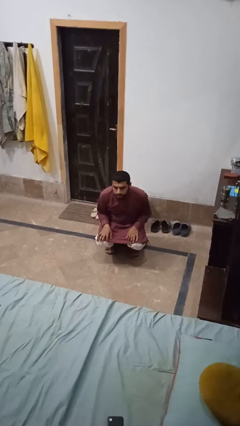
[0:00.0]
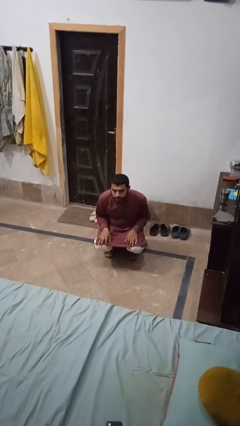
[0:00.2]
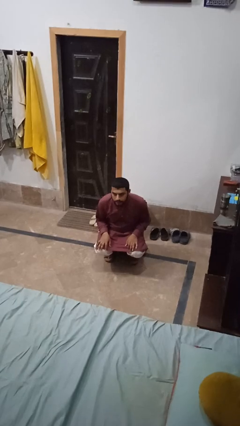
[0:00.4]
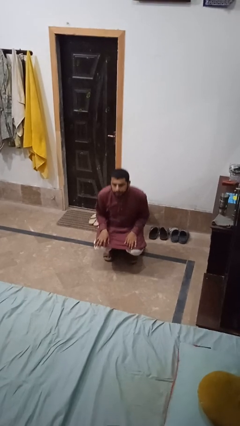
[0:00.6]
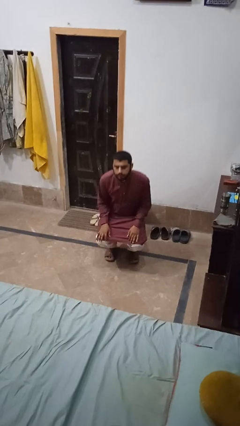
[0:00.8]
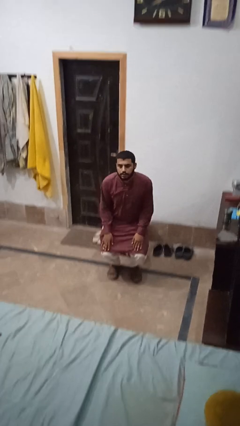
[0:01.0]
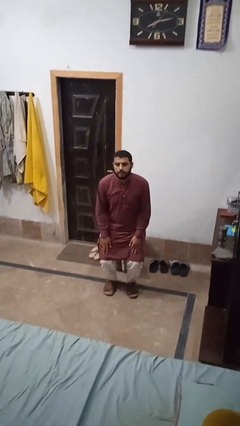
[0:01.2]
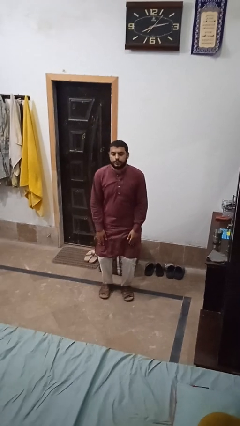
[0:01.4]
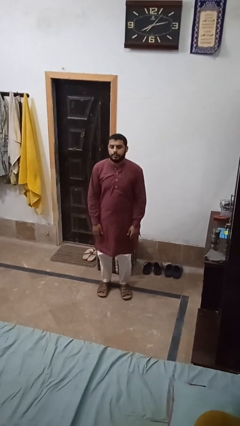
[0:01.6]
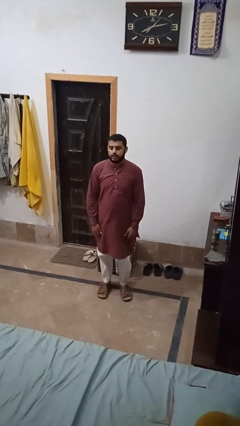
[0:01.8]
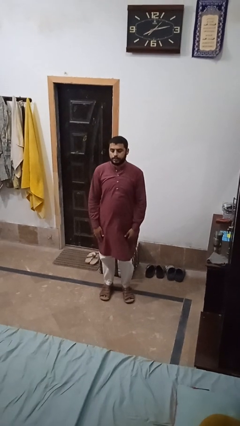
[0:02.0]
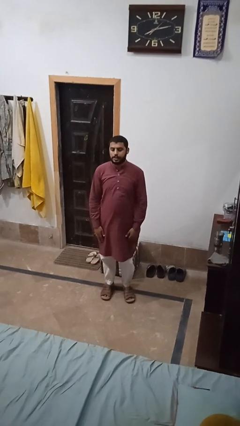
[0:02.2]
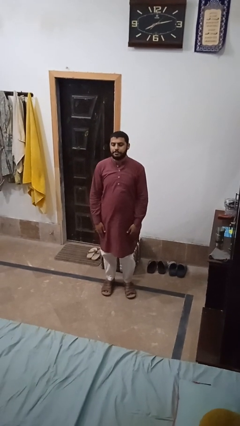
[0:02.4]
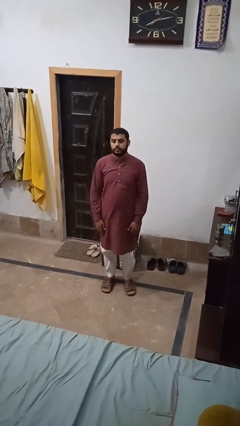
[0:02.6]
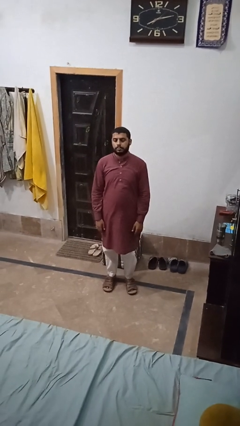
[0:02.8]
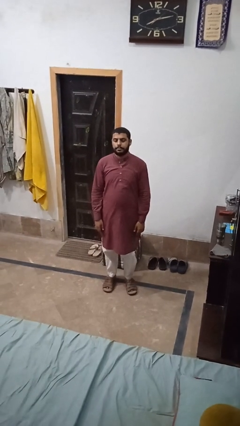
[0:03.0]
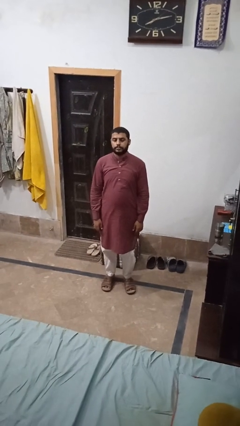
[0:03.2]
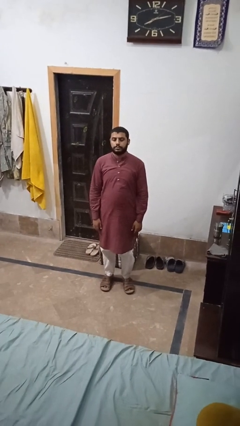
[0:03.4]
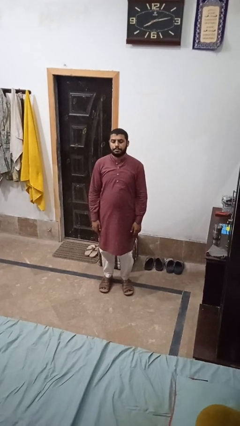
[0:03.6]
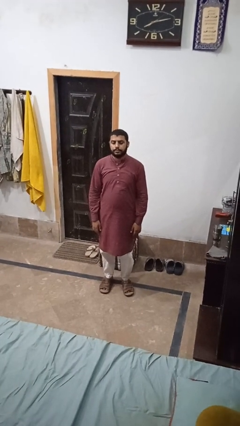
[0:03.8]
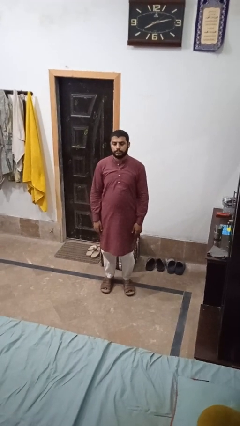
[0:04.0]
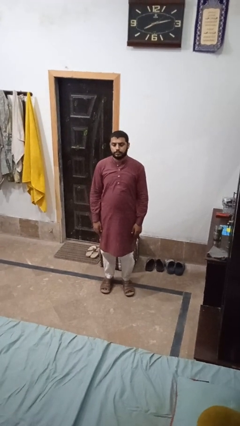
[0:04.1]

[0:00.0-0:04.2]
person stands up

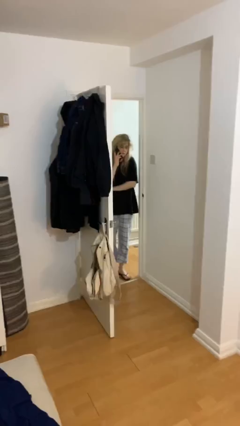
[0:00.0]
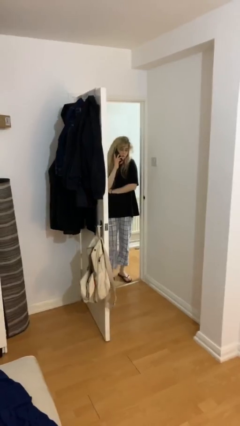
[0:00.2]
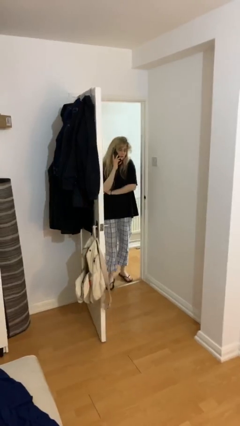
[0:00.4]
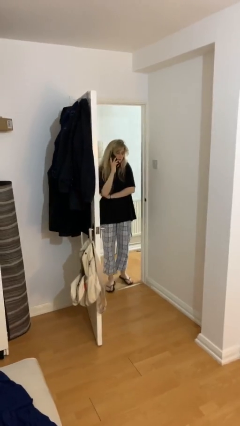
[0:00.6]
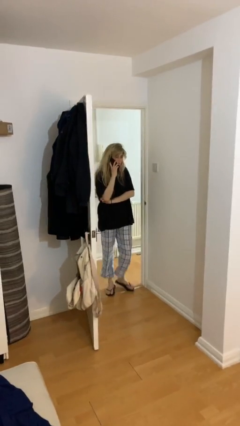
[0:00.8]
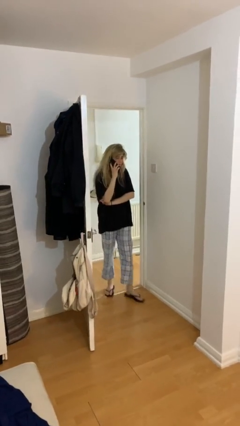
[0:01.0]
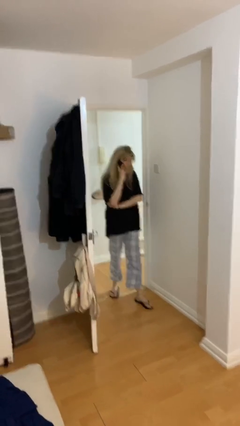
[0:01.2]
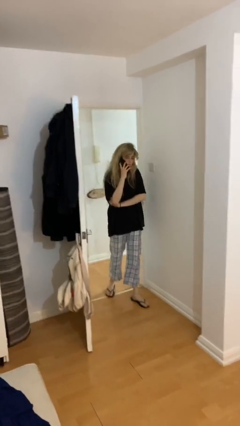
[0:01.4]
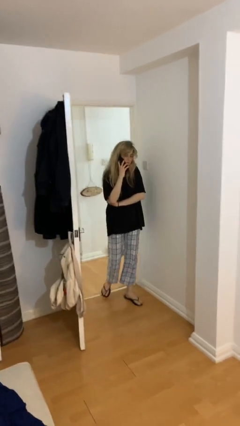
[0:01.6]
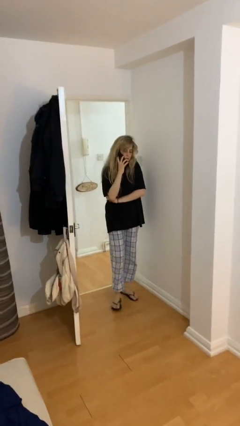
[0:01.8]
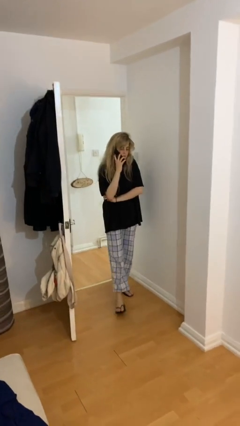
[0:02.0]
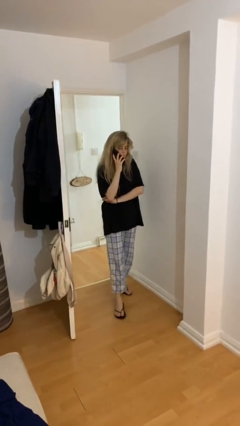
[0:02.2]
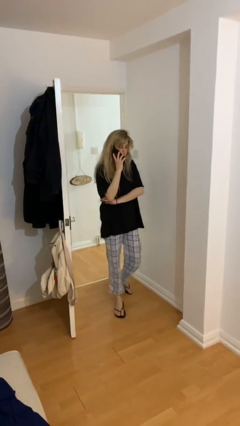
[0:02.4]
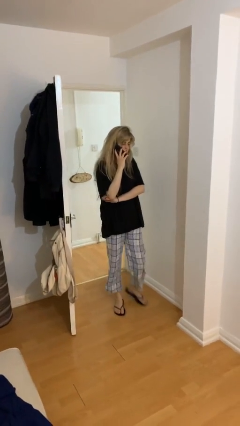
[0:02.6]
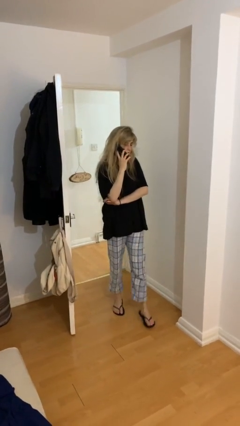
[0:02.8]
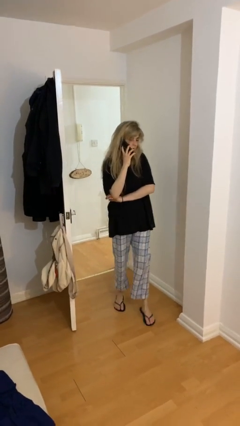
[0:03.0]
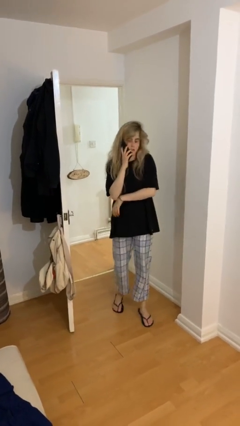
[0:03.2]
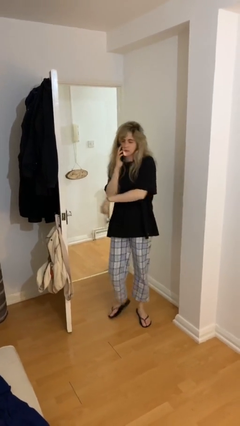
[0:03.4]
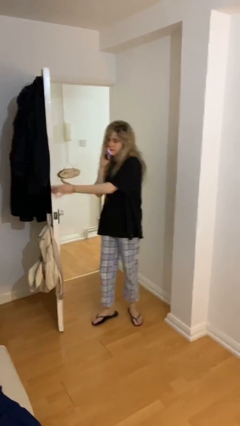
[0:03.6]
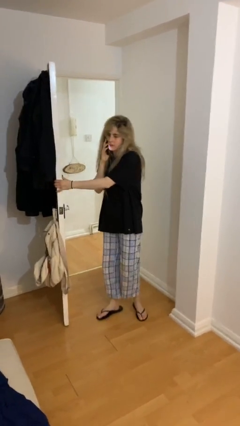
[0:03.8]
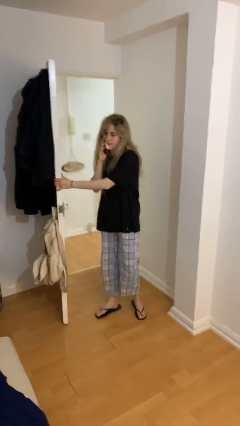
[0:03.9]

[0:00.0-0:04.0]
person enters scene through structure

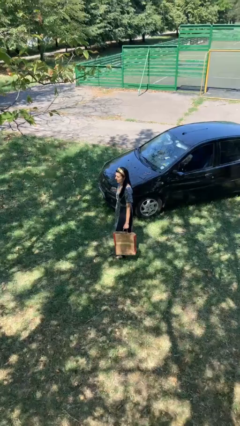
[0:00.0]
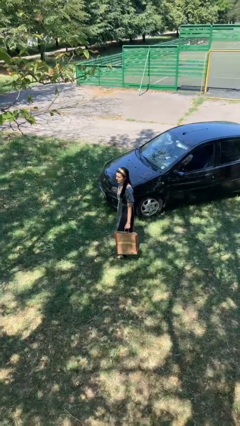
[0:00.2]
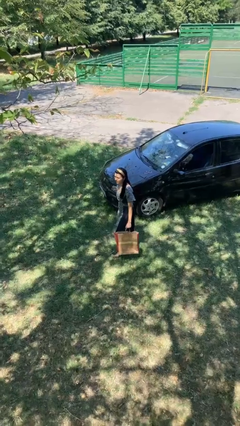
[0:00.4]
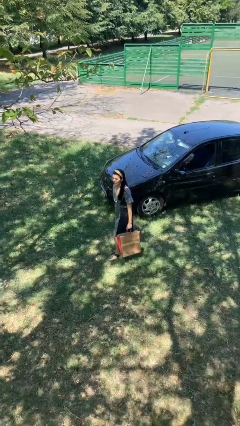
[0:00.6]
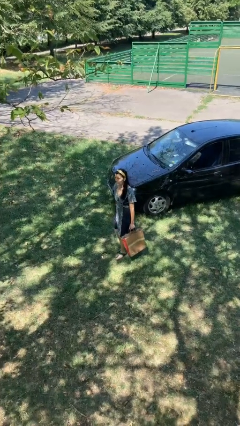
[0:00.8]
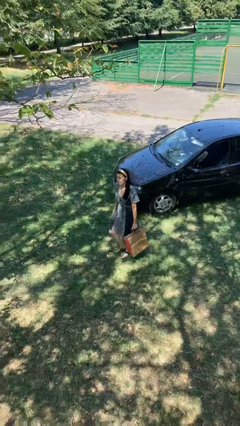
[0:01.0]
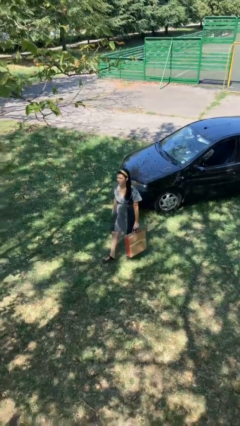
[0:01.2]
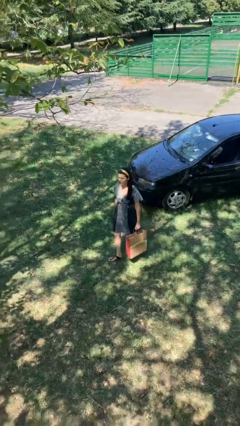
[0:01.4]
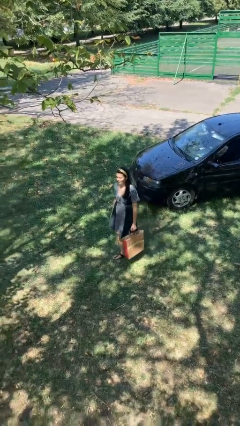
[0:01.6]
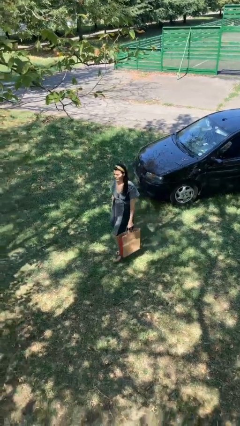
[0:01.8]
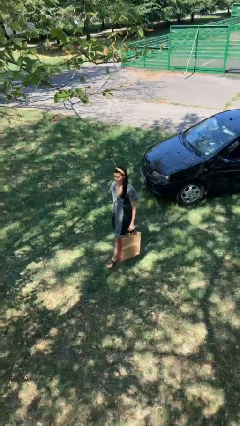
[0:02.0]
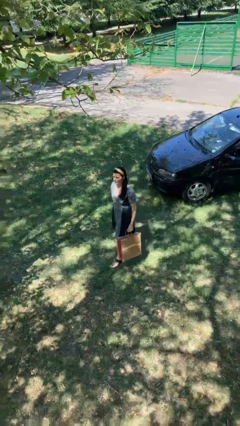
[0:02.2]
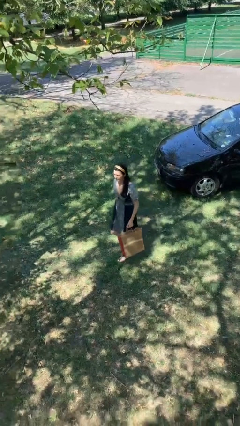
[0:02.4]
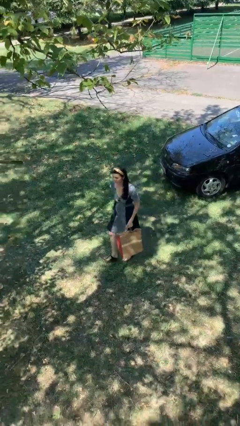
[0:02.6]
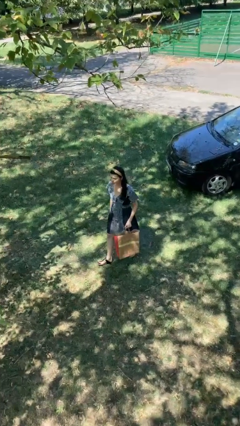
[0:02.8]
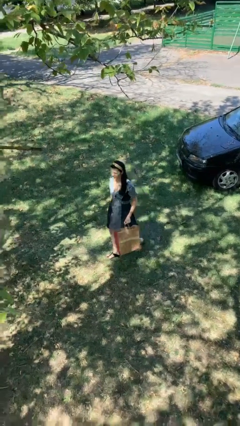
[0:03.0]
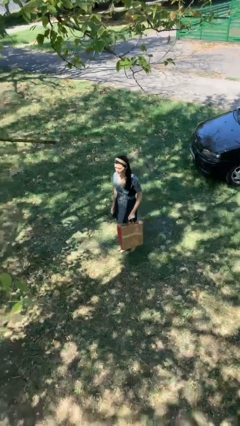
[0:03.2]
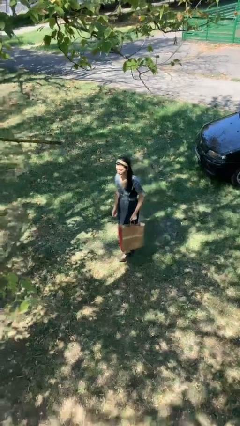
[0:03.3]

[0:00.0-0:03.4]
person carries groceries

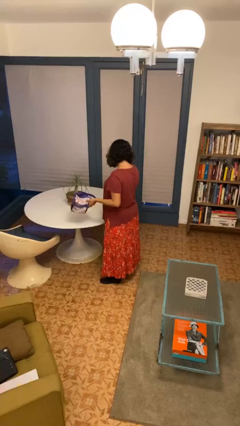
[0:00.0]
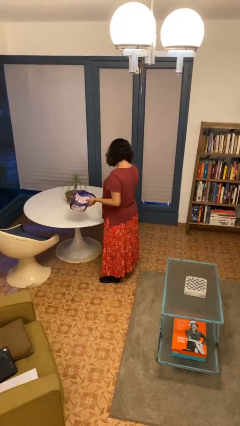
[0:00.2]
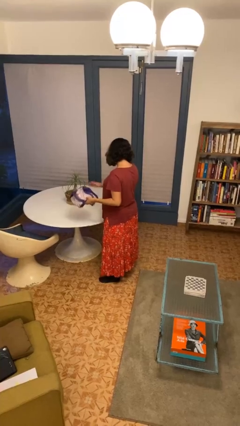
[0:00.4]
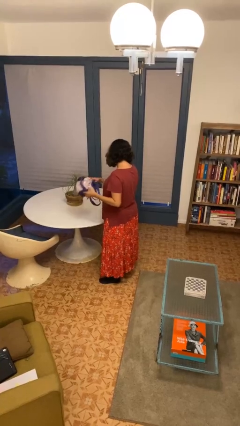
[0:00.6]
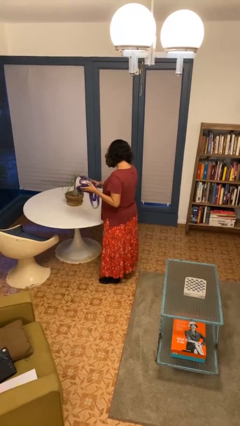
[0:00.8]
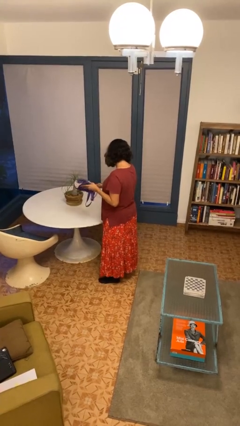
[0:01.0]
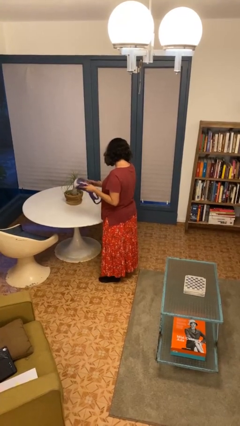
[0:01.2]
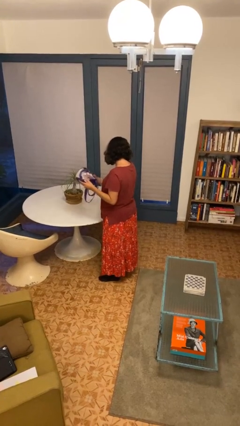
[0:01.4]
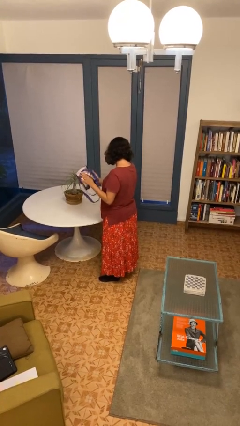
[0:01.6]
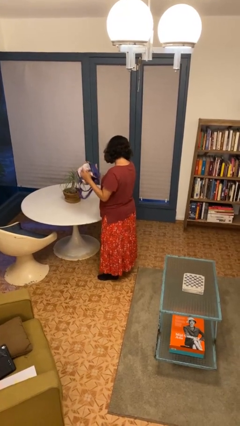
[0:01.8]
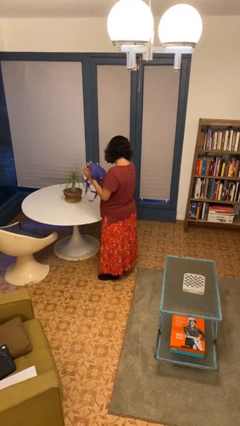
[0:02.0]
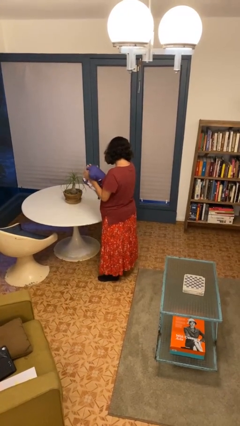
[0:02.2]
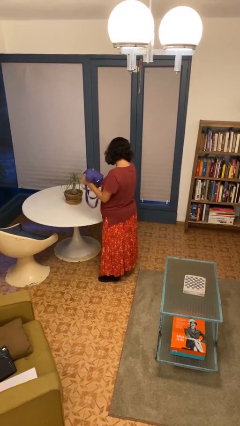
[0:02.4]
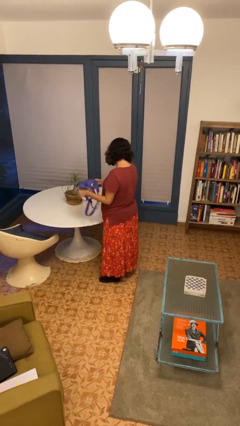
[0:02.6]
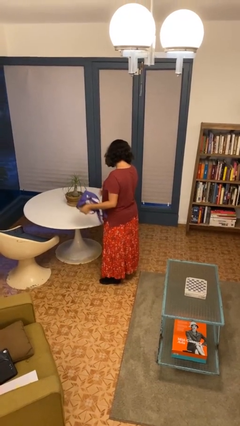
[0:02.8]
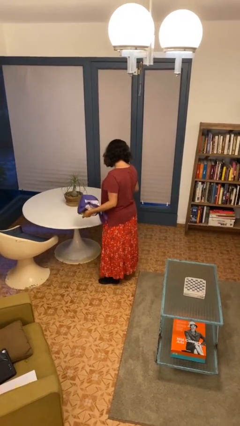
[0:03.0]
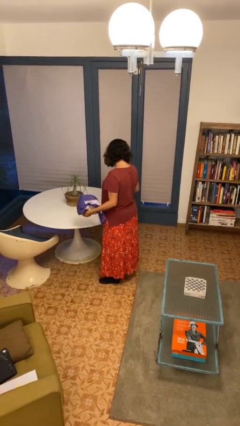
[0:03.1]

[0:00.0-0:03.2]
person squeezes object

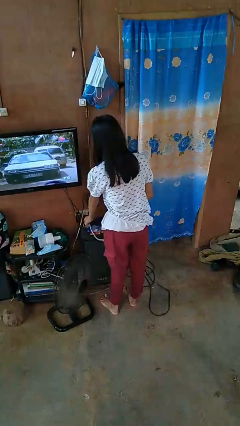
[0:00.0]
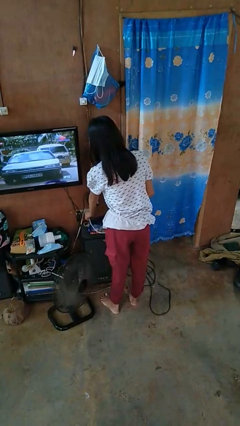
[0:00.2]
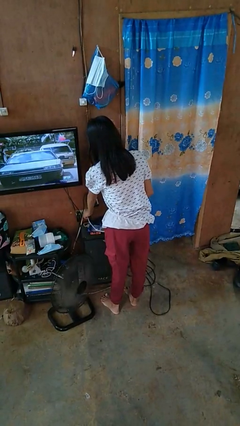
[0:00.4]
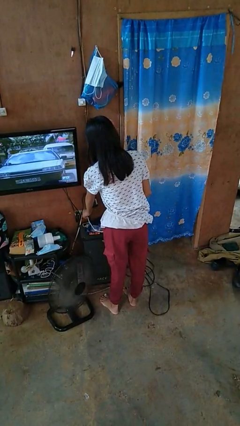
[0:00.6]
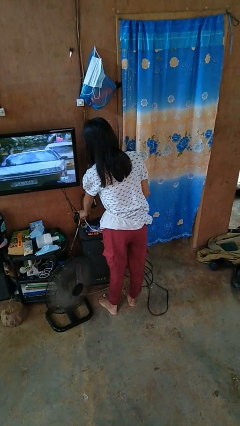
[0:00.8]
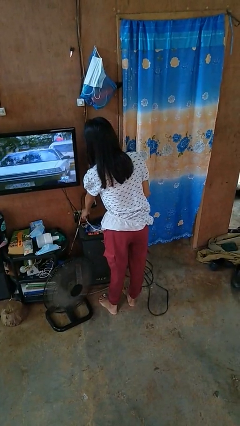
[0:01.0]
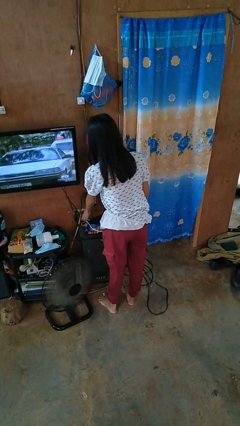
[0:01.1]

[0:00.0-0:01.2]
person plugs into electrical socket

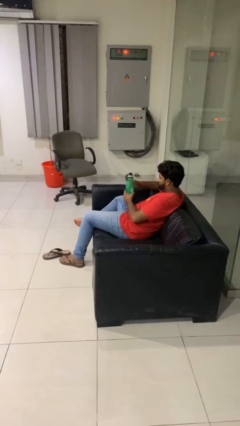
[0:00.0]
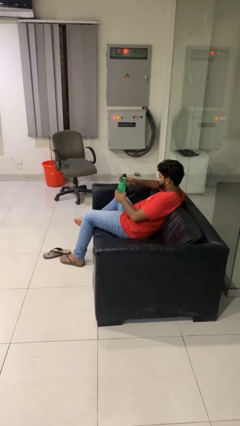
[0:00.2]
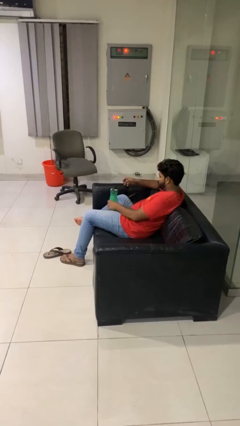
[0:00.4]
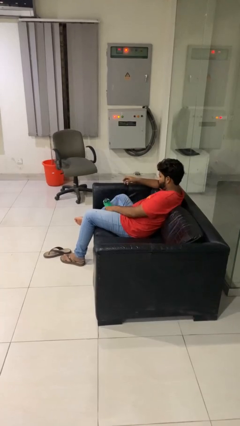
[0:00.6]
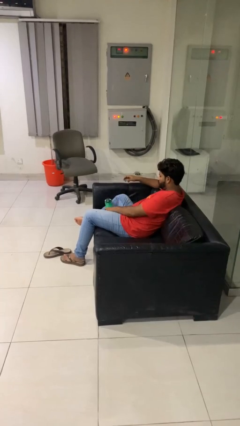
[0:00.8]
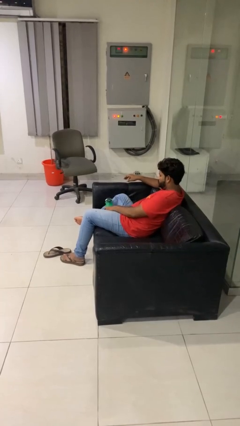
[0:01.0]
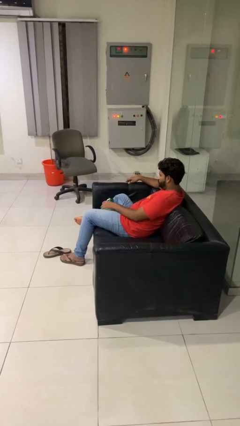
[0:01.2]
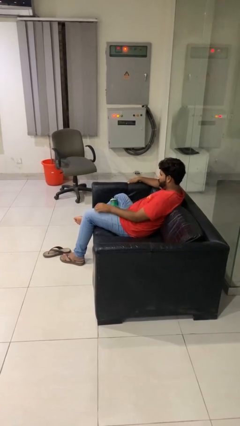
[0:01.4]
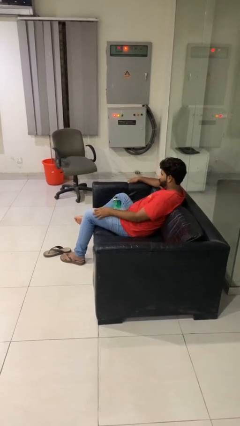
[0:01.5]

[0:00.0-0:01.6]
person puts down object on couch
